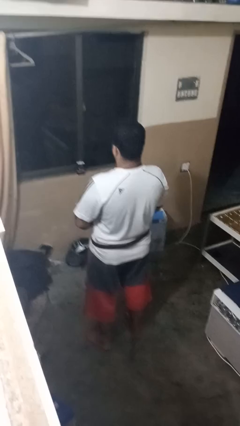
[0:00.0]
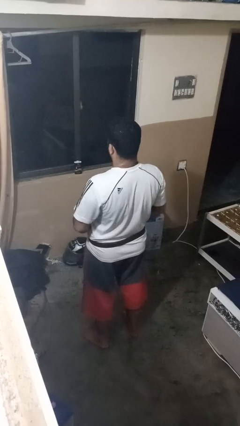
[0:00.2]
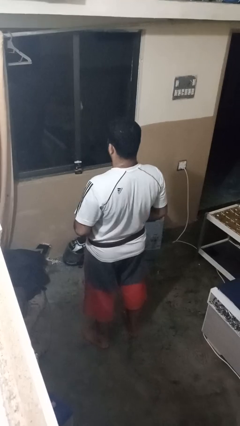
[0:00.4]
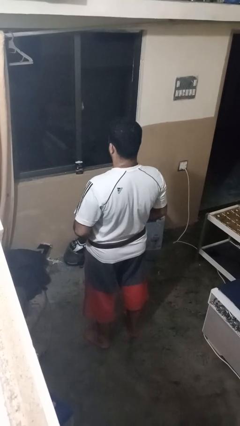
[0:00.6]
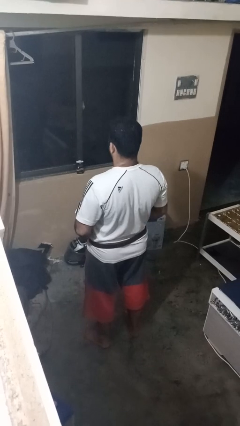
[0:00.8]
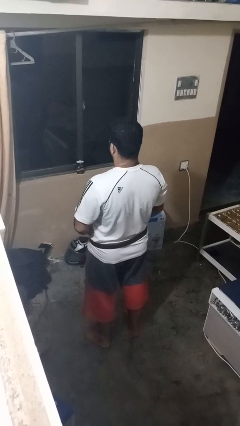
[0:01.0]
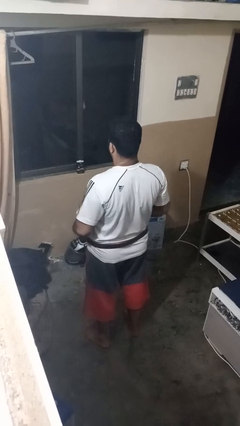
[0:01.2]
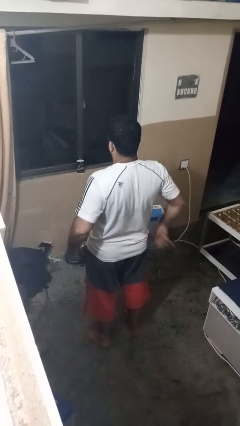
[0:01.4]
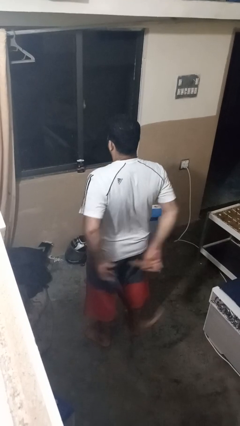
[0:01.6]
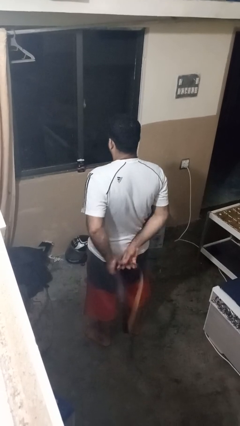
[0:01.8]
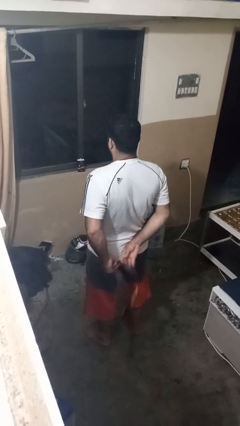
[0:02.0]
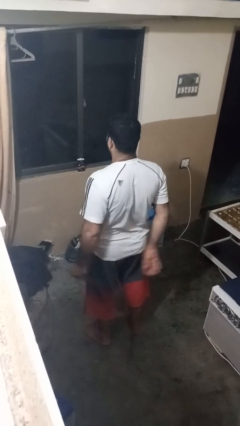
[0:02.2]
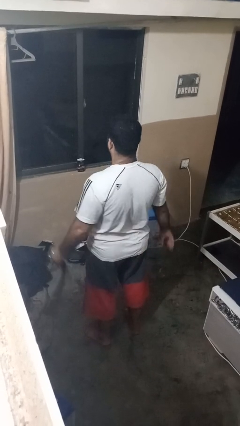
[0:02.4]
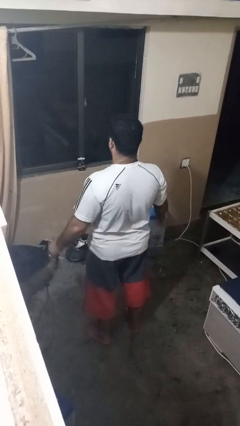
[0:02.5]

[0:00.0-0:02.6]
person takes off belt

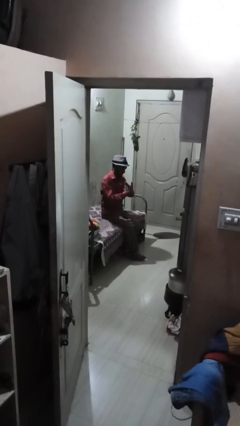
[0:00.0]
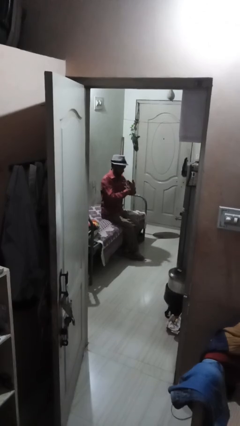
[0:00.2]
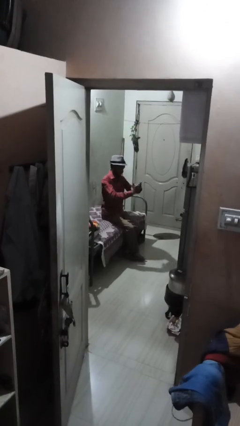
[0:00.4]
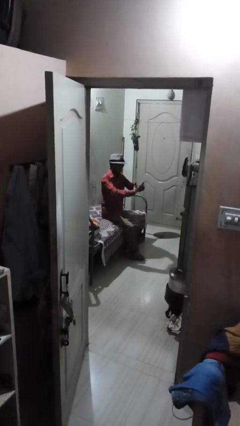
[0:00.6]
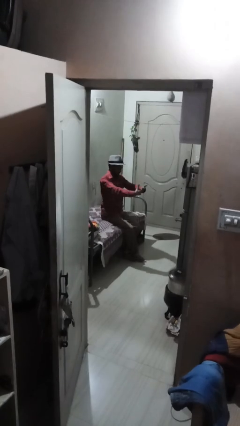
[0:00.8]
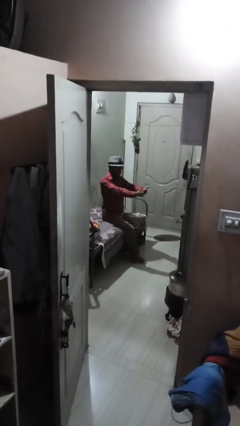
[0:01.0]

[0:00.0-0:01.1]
person cracks knuckles

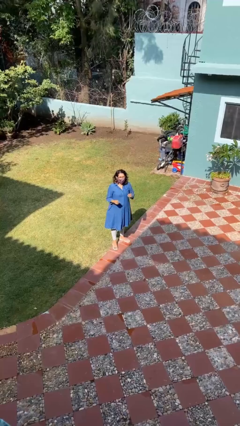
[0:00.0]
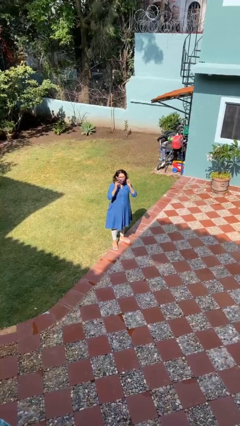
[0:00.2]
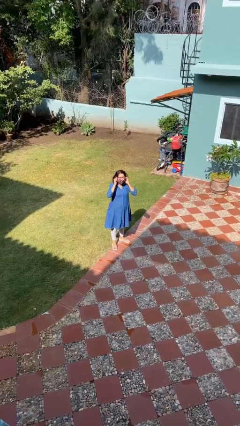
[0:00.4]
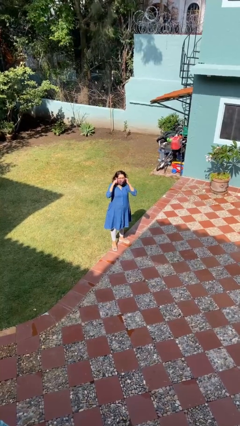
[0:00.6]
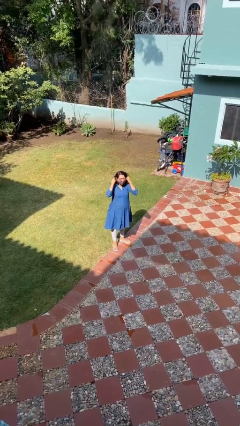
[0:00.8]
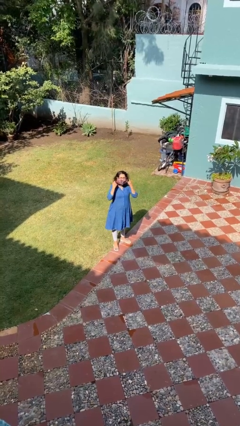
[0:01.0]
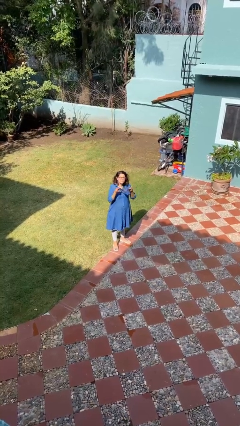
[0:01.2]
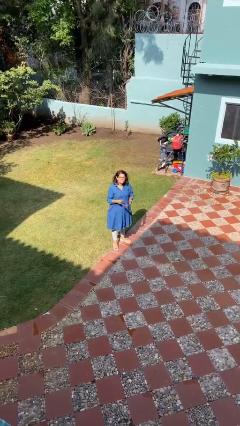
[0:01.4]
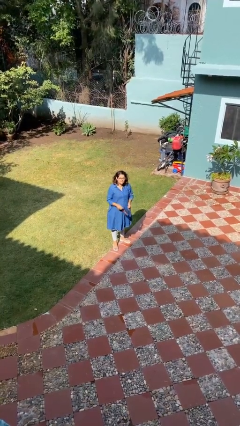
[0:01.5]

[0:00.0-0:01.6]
person takes off facemask

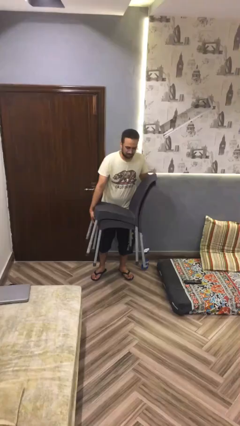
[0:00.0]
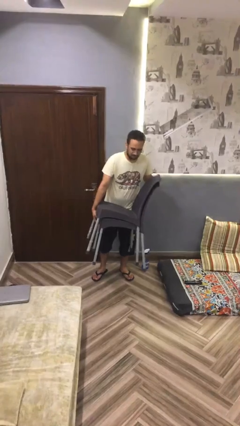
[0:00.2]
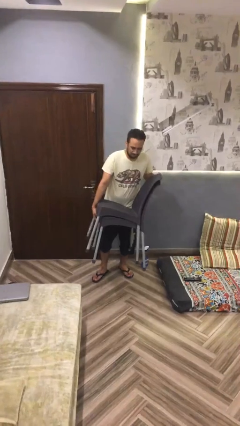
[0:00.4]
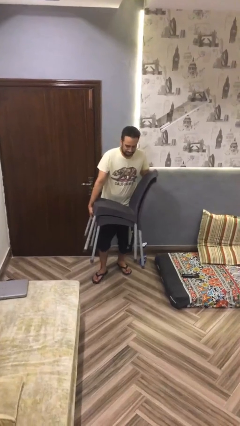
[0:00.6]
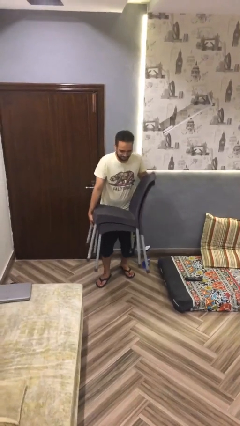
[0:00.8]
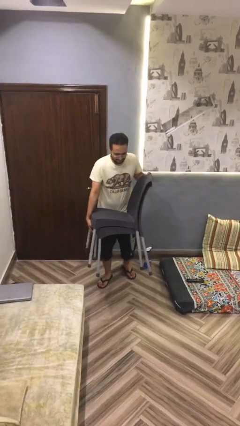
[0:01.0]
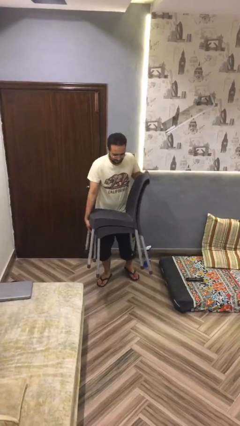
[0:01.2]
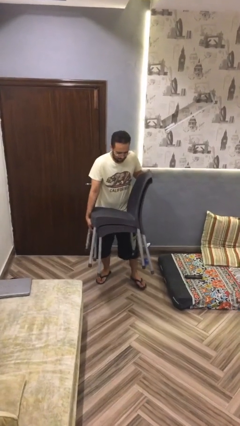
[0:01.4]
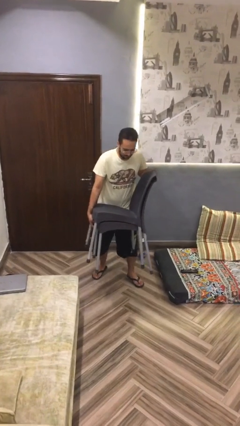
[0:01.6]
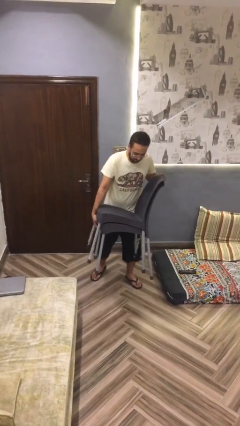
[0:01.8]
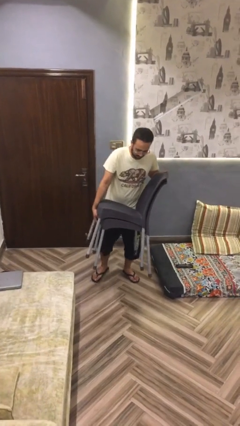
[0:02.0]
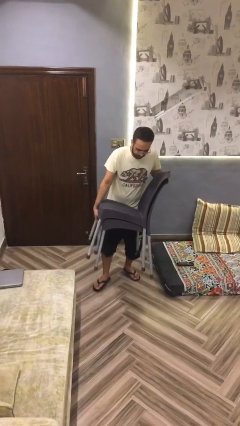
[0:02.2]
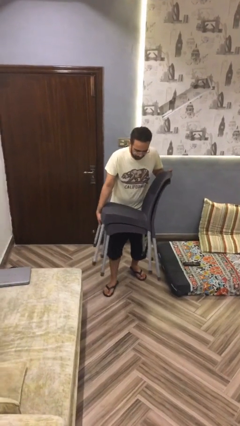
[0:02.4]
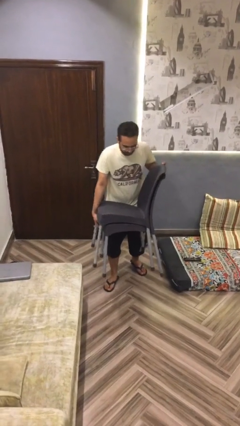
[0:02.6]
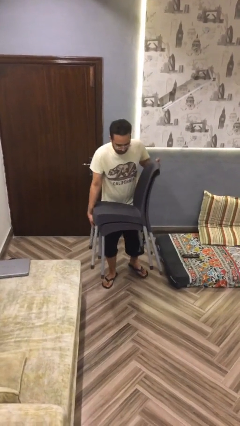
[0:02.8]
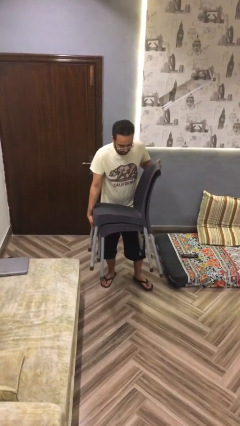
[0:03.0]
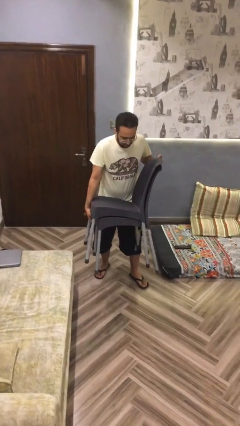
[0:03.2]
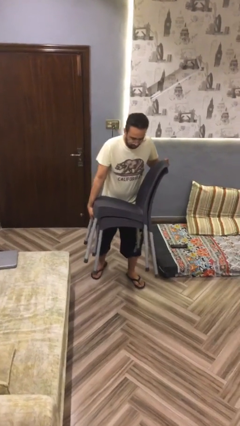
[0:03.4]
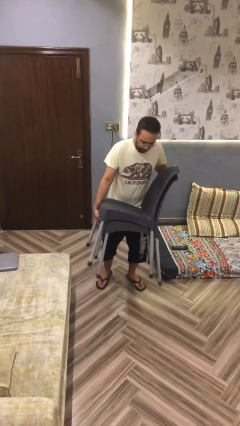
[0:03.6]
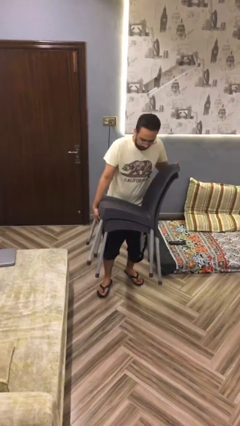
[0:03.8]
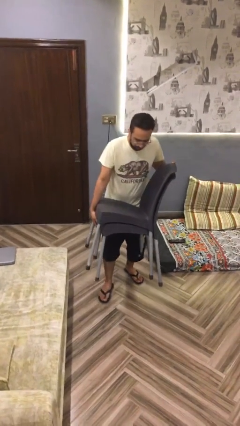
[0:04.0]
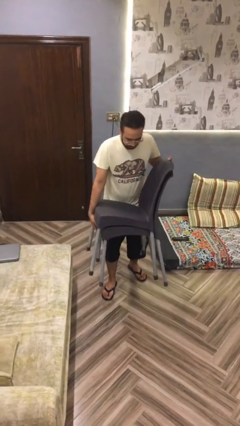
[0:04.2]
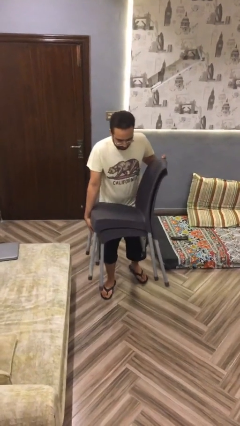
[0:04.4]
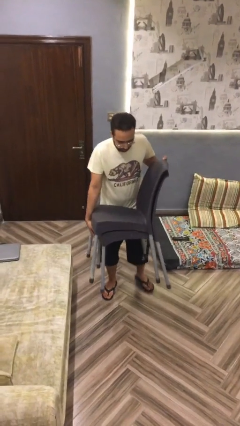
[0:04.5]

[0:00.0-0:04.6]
person carries heavy object

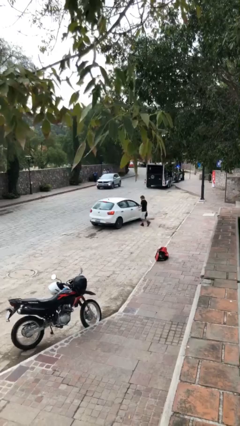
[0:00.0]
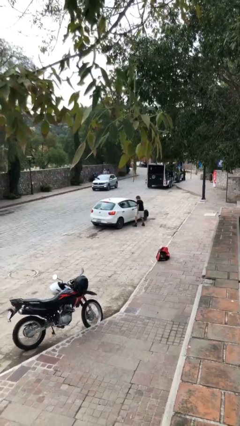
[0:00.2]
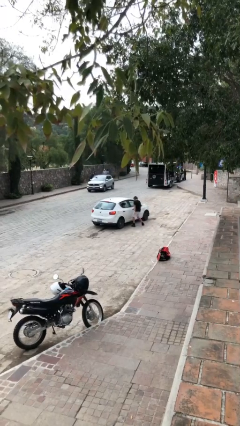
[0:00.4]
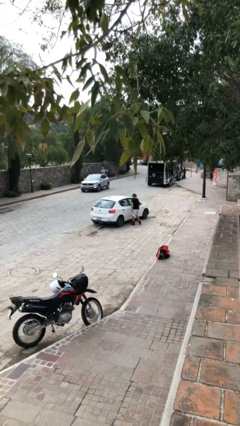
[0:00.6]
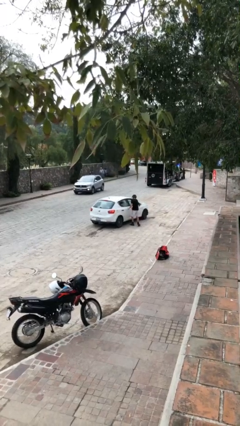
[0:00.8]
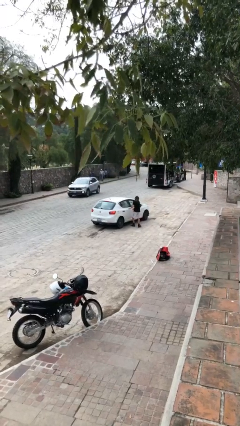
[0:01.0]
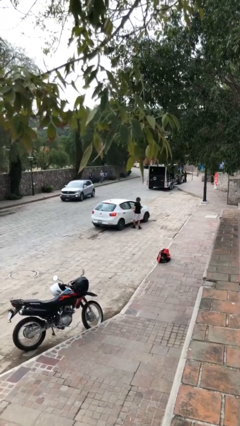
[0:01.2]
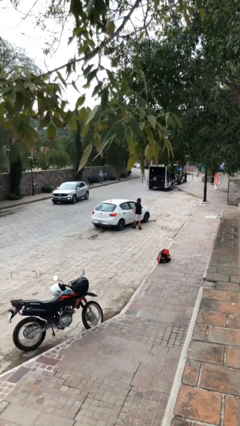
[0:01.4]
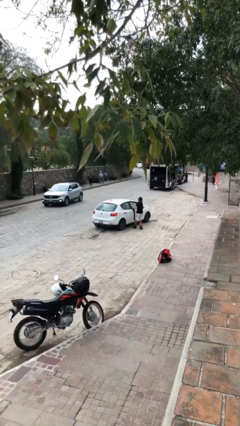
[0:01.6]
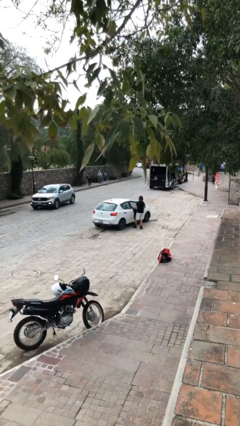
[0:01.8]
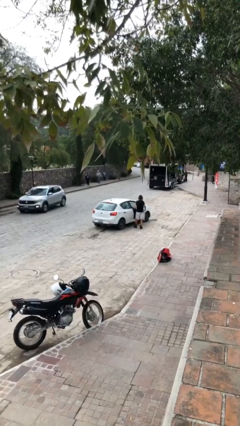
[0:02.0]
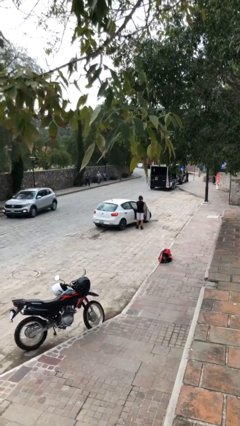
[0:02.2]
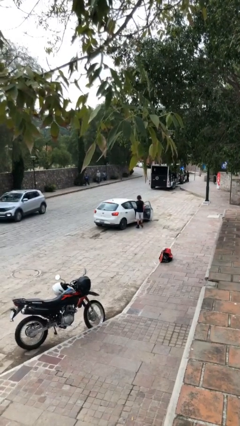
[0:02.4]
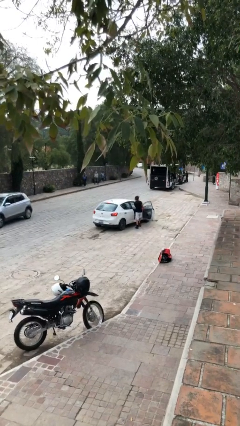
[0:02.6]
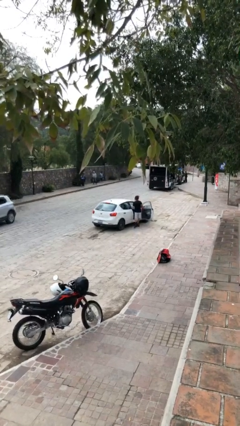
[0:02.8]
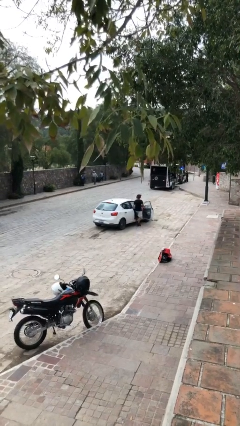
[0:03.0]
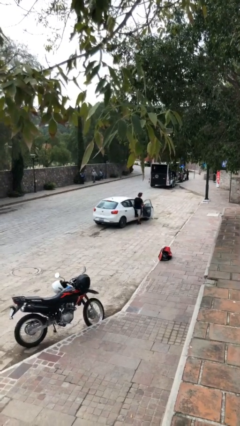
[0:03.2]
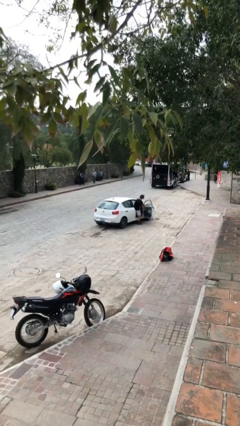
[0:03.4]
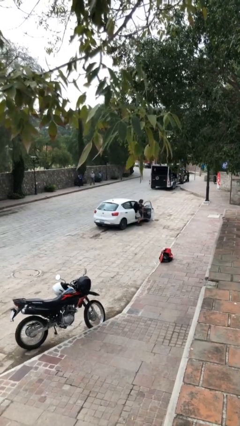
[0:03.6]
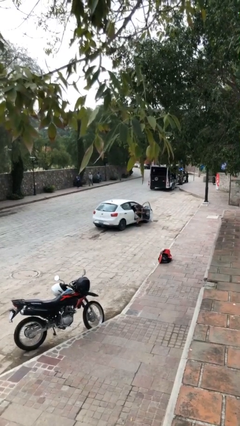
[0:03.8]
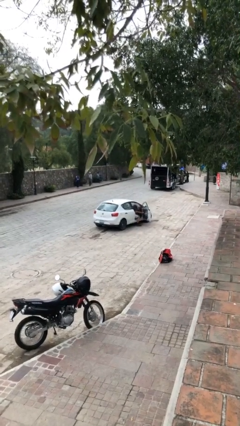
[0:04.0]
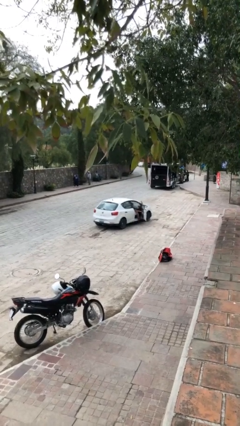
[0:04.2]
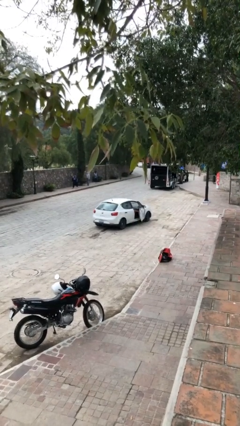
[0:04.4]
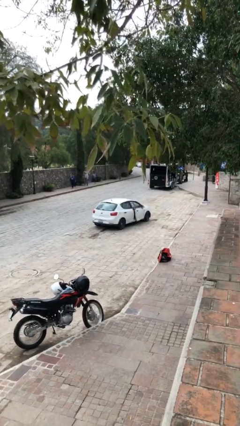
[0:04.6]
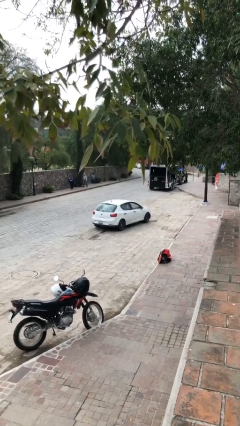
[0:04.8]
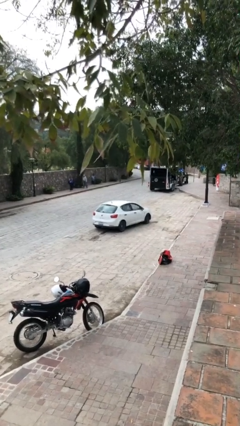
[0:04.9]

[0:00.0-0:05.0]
car picks up person

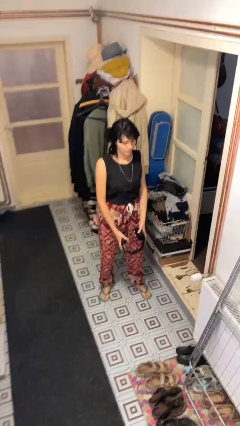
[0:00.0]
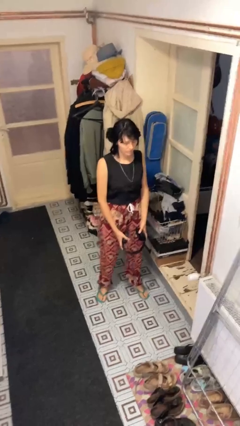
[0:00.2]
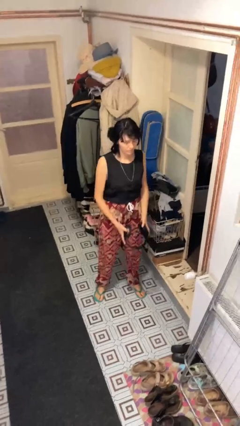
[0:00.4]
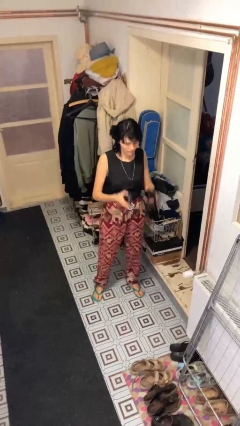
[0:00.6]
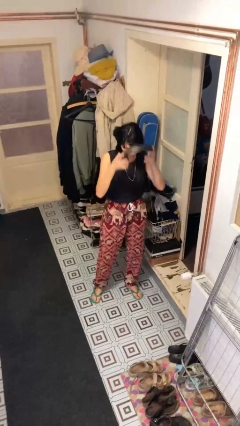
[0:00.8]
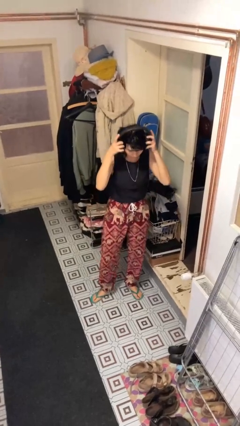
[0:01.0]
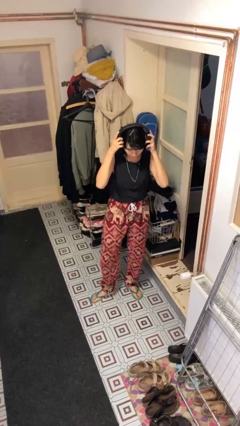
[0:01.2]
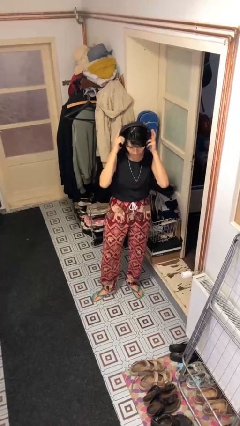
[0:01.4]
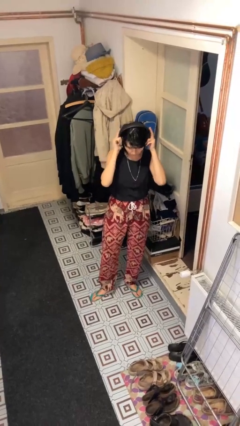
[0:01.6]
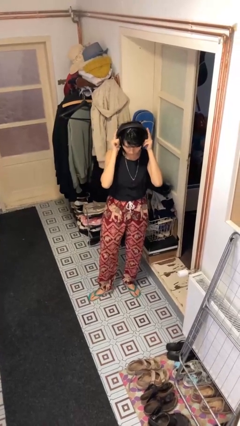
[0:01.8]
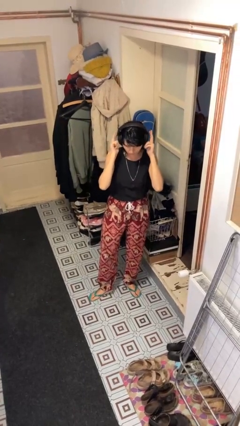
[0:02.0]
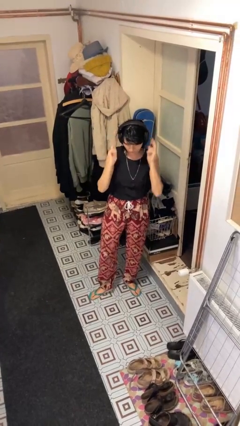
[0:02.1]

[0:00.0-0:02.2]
person puts on headphones
